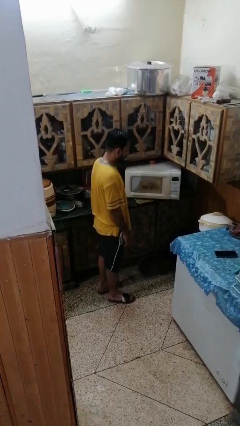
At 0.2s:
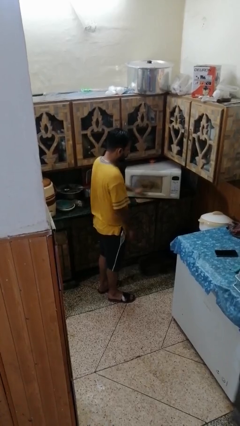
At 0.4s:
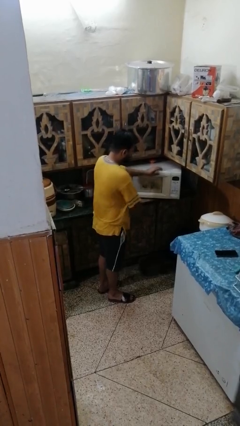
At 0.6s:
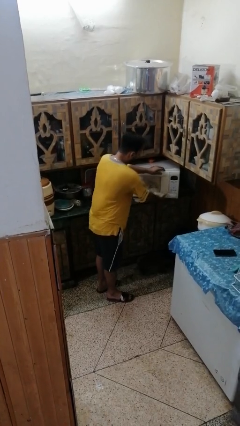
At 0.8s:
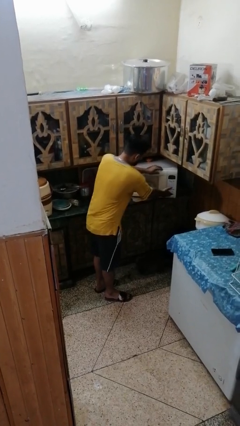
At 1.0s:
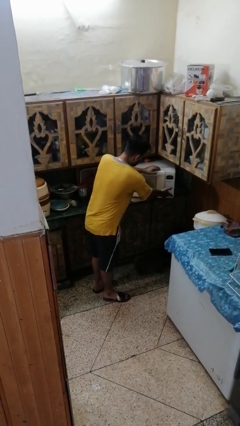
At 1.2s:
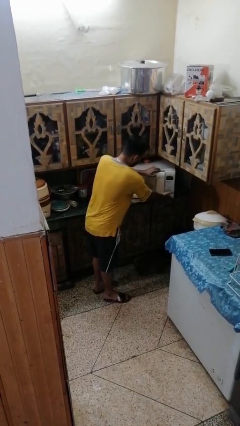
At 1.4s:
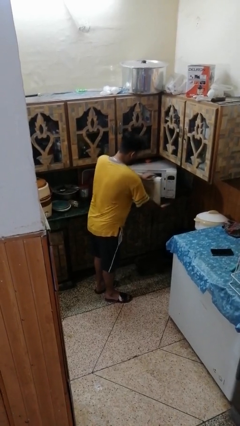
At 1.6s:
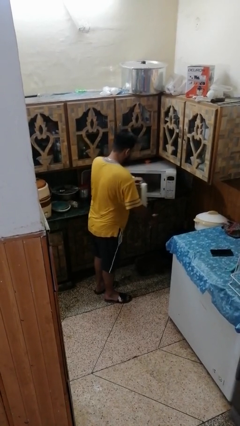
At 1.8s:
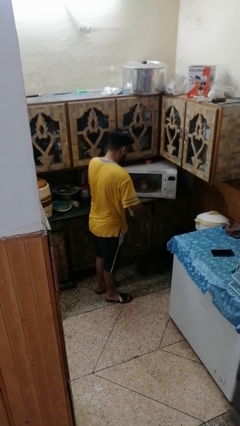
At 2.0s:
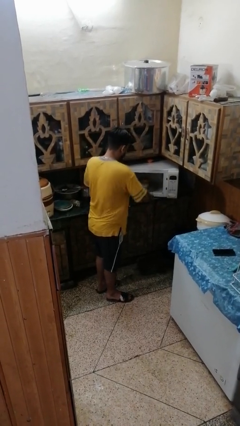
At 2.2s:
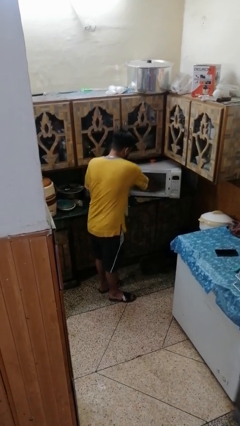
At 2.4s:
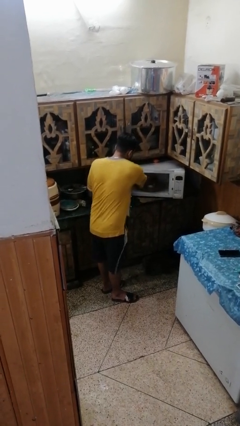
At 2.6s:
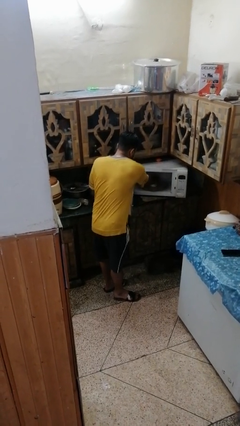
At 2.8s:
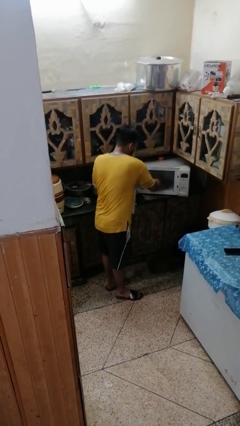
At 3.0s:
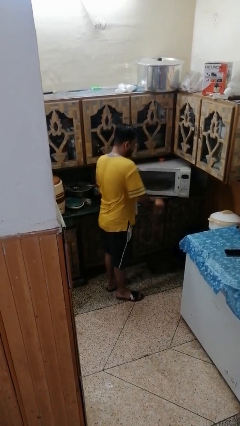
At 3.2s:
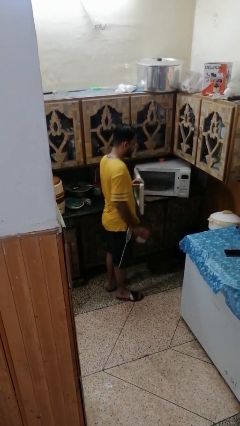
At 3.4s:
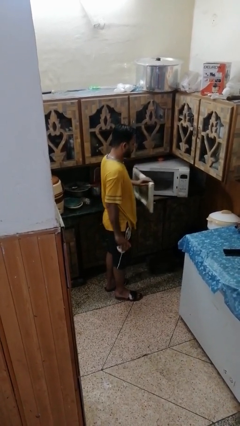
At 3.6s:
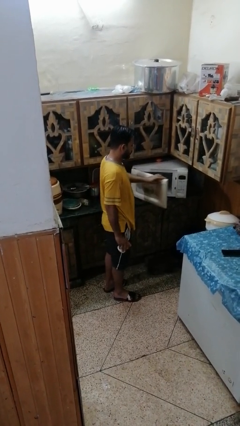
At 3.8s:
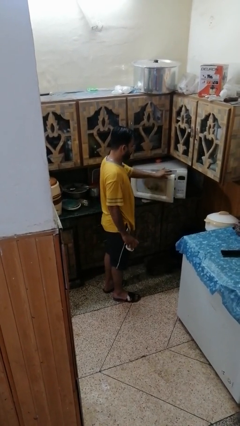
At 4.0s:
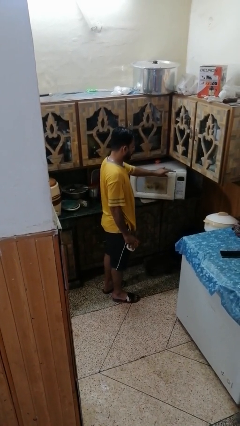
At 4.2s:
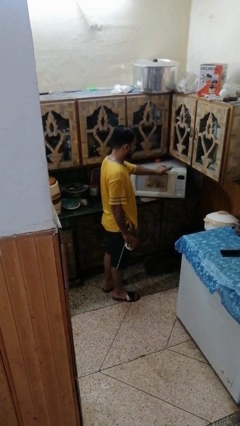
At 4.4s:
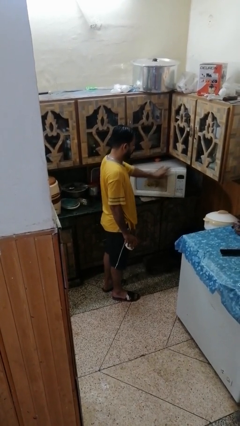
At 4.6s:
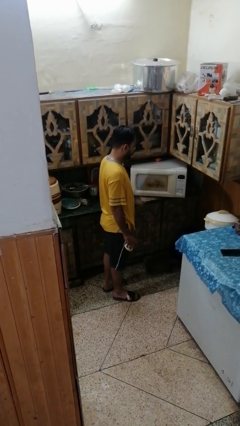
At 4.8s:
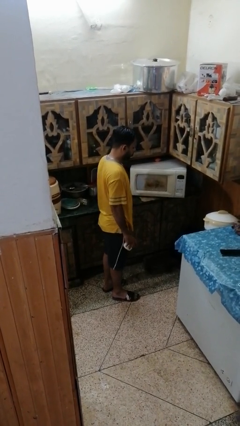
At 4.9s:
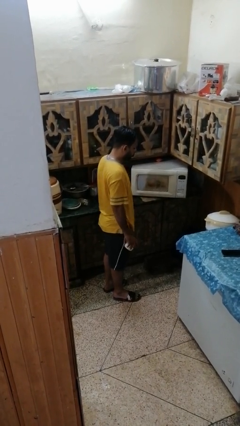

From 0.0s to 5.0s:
person takes object from refrigerator

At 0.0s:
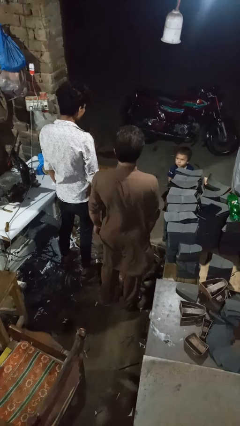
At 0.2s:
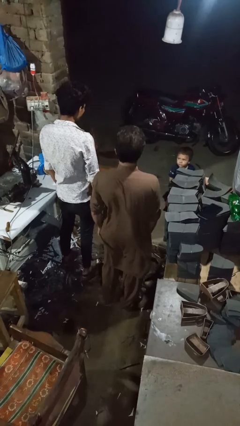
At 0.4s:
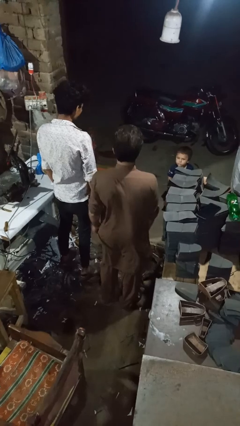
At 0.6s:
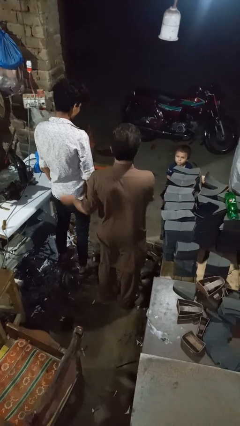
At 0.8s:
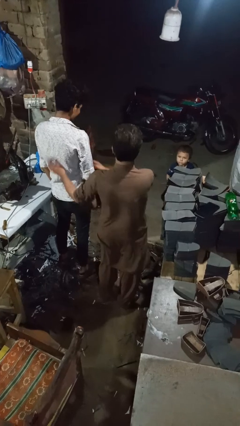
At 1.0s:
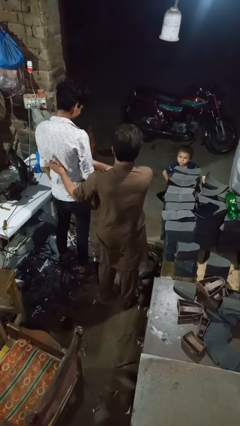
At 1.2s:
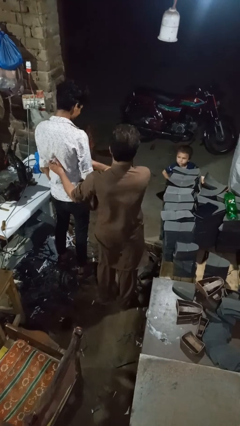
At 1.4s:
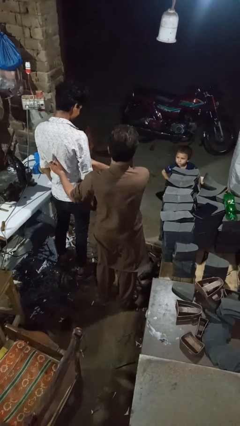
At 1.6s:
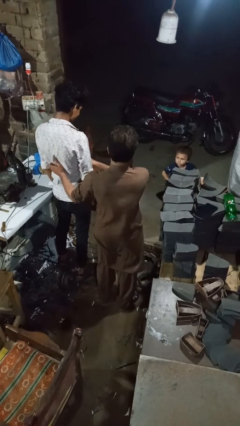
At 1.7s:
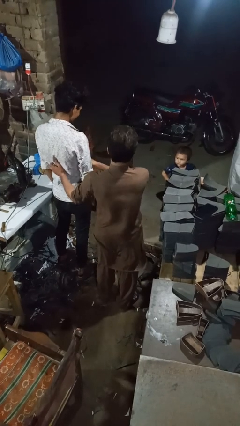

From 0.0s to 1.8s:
person tickles person

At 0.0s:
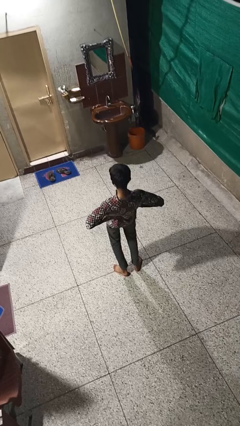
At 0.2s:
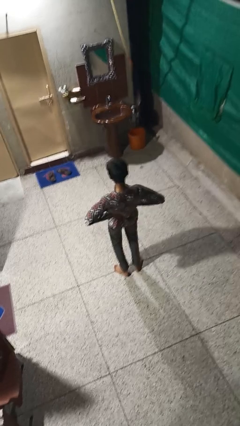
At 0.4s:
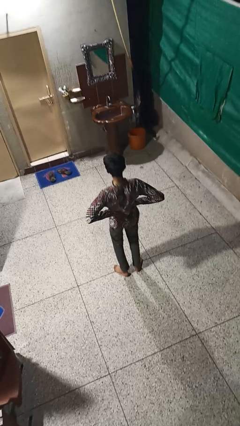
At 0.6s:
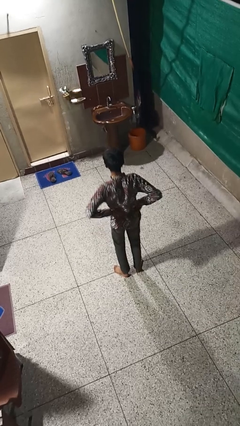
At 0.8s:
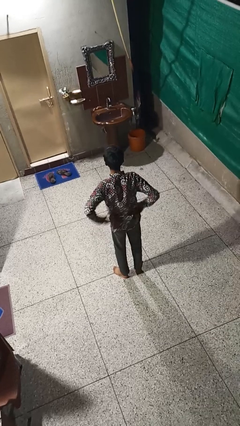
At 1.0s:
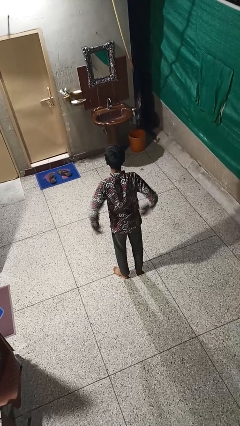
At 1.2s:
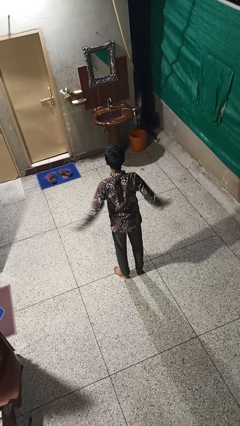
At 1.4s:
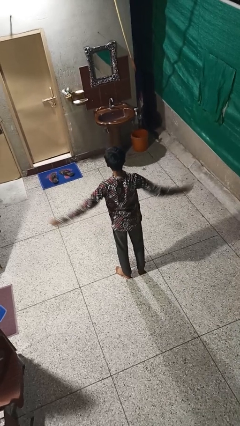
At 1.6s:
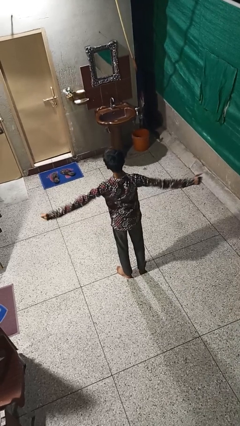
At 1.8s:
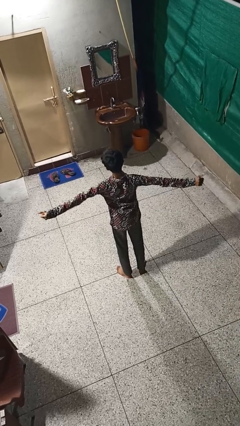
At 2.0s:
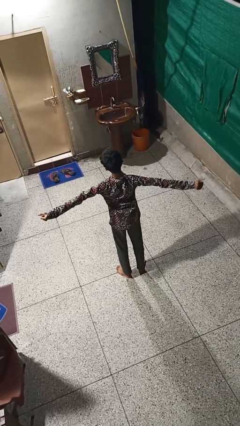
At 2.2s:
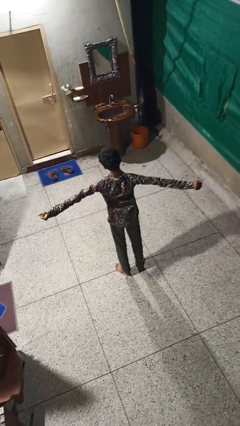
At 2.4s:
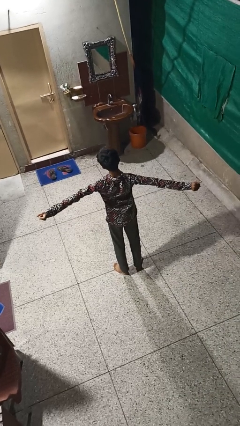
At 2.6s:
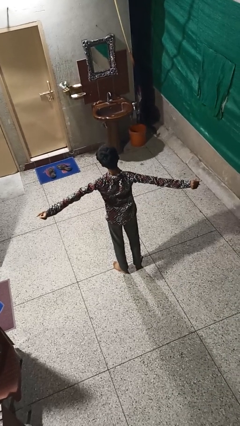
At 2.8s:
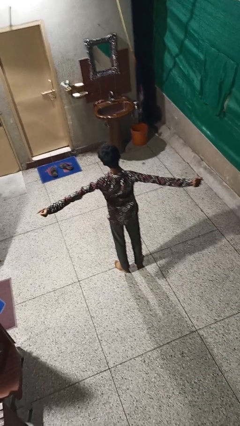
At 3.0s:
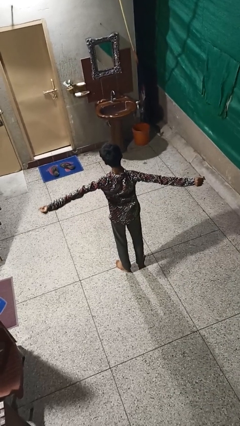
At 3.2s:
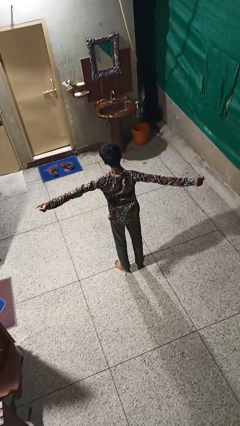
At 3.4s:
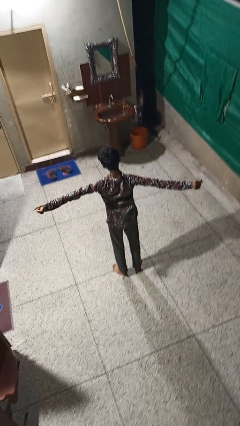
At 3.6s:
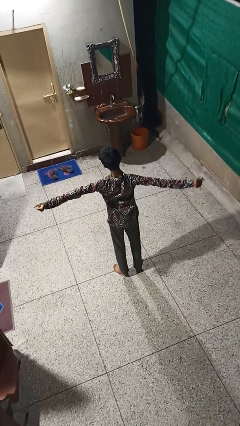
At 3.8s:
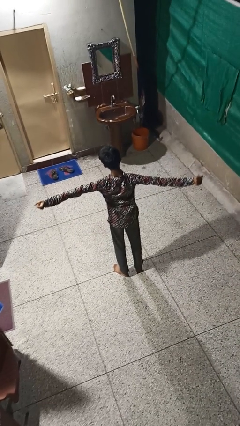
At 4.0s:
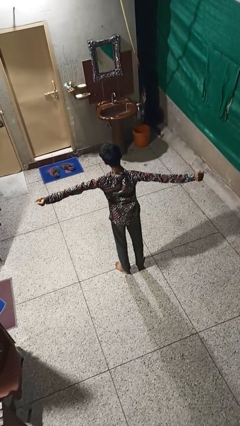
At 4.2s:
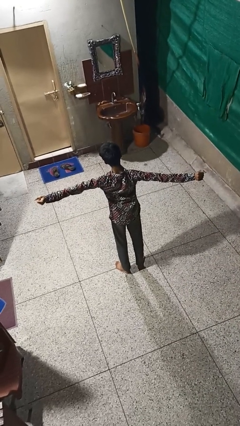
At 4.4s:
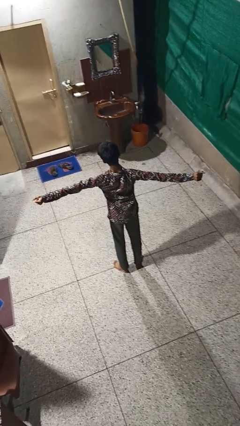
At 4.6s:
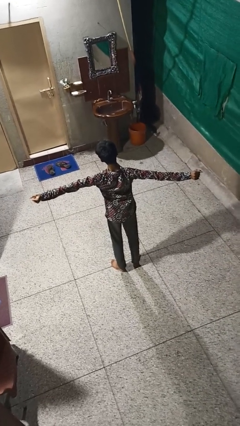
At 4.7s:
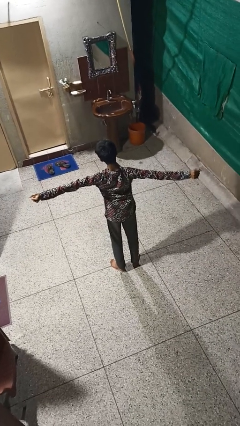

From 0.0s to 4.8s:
person stretches arms to side

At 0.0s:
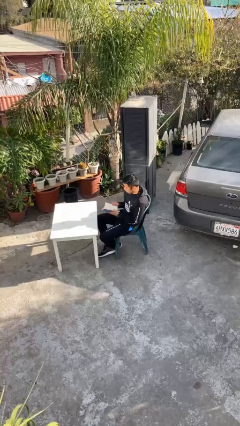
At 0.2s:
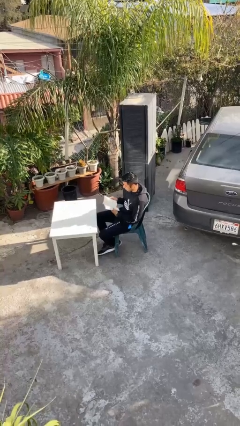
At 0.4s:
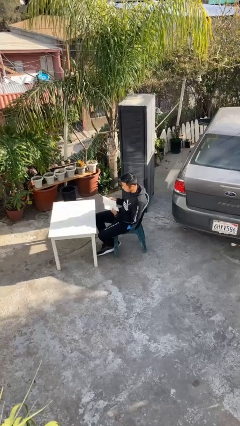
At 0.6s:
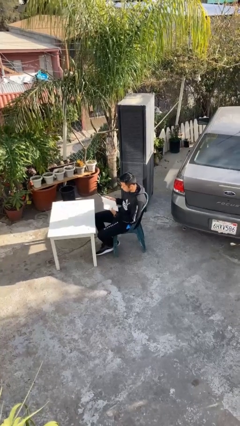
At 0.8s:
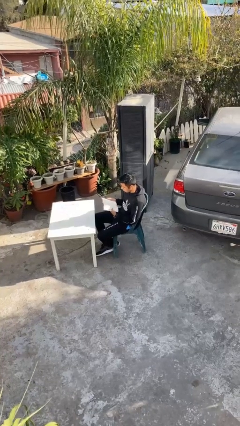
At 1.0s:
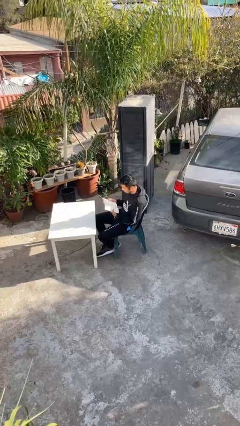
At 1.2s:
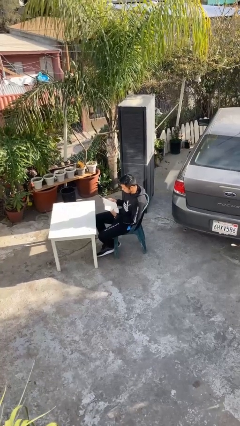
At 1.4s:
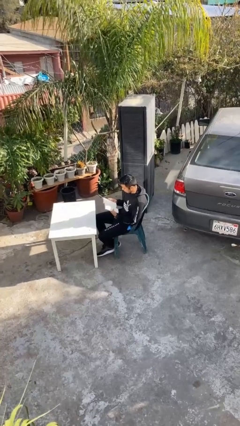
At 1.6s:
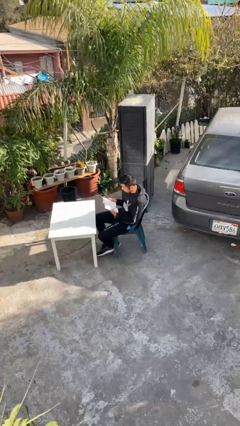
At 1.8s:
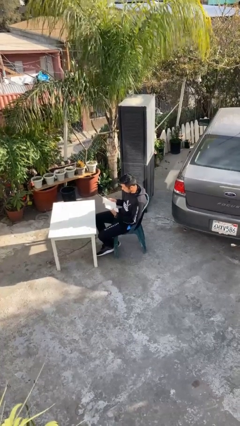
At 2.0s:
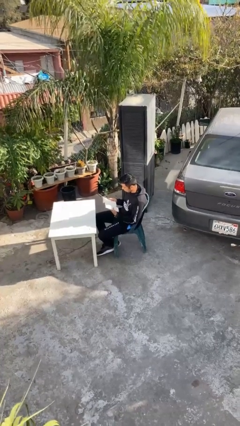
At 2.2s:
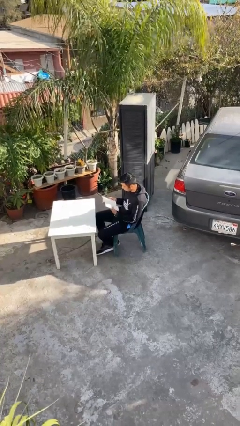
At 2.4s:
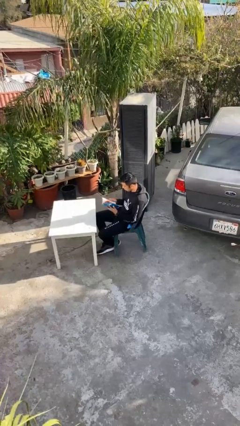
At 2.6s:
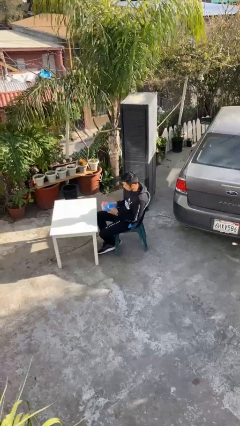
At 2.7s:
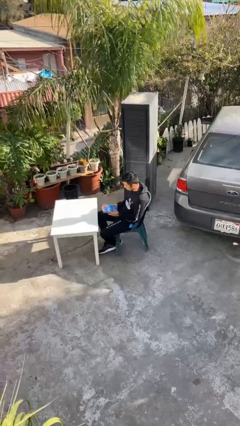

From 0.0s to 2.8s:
person reads document

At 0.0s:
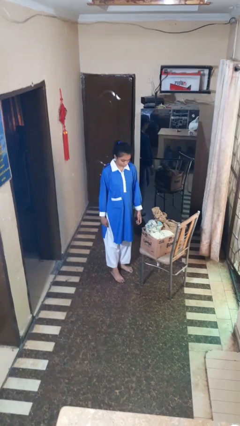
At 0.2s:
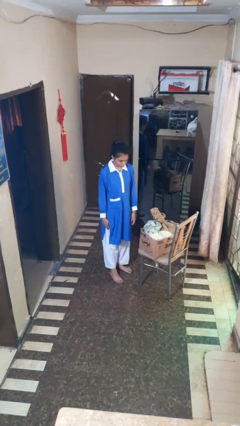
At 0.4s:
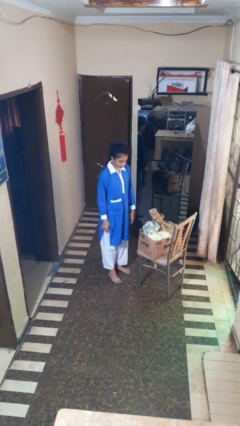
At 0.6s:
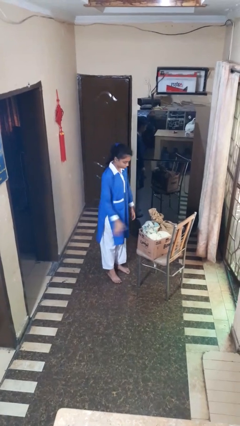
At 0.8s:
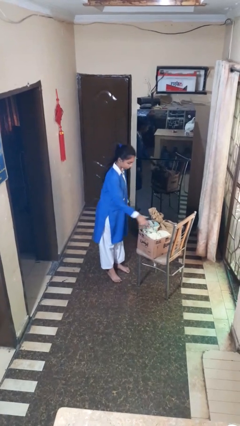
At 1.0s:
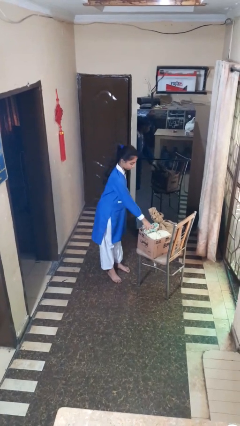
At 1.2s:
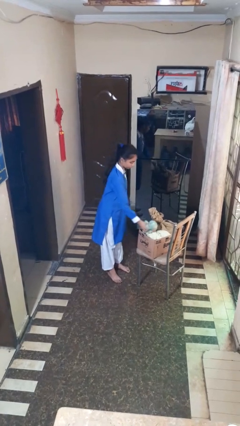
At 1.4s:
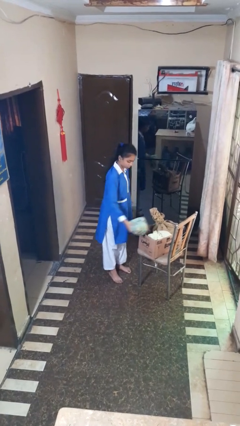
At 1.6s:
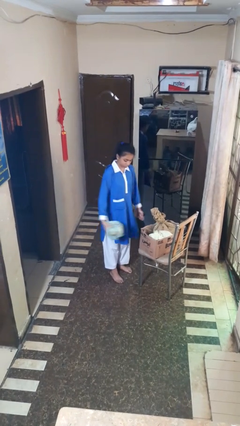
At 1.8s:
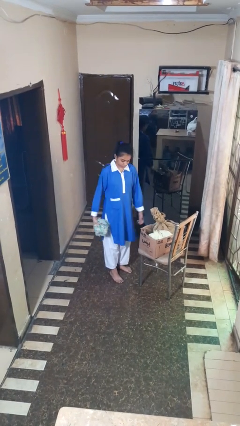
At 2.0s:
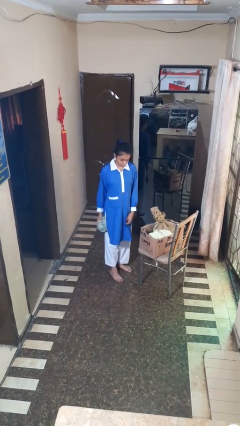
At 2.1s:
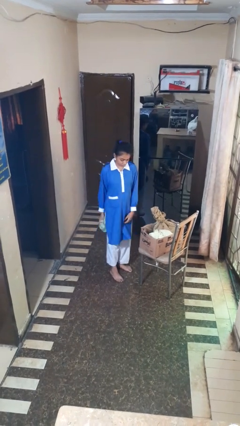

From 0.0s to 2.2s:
person takes object from box

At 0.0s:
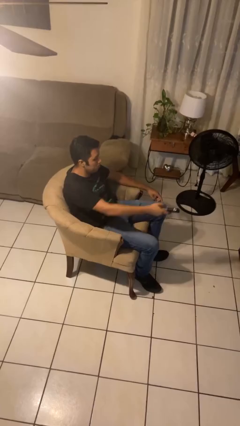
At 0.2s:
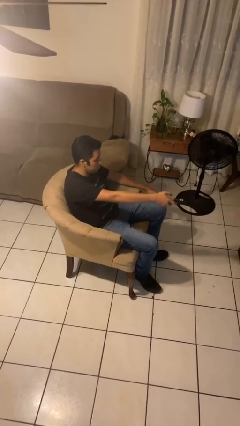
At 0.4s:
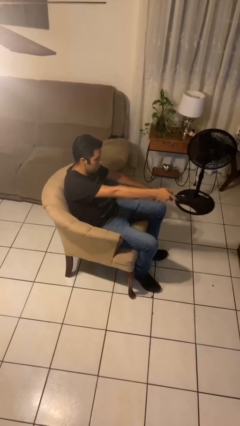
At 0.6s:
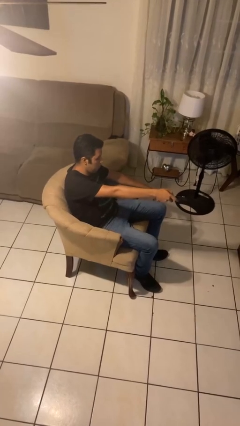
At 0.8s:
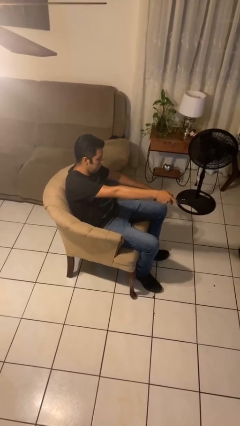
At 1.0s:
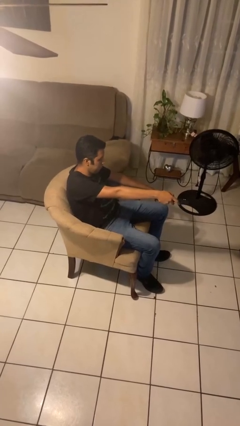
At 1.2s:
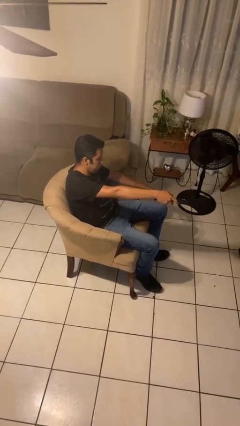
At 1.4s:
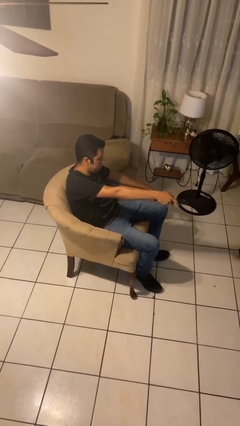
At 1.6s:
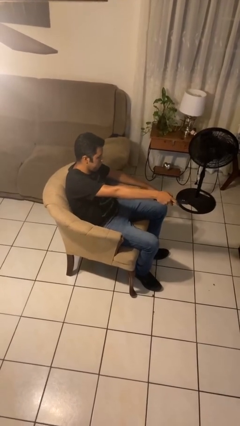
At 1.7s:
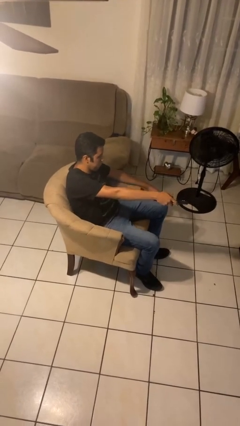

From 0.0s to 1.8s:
person uses television remote
